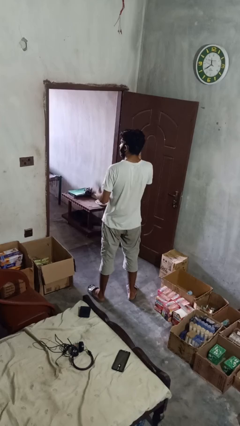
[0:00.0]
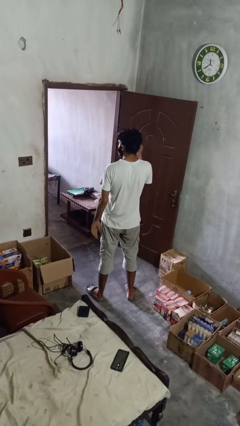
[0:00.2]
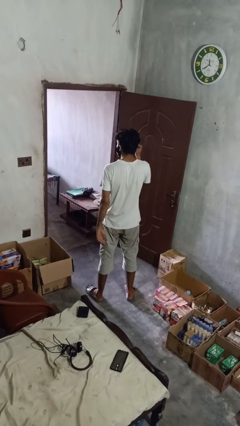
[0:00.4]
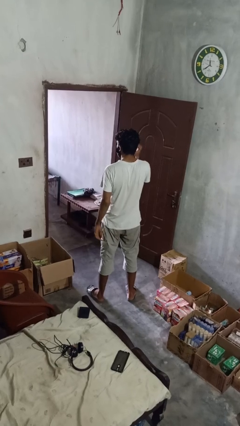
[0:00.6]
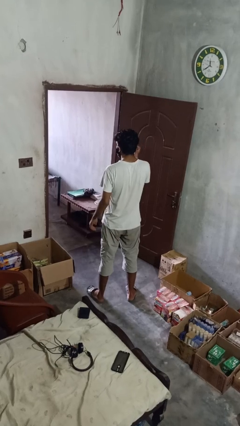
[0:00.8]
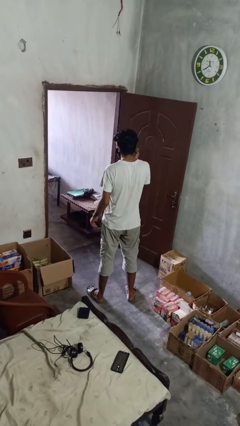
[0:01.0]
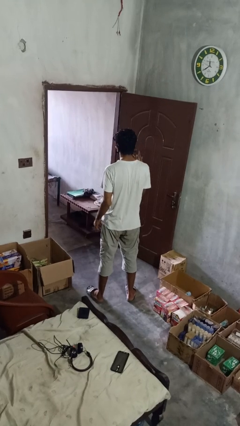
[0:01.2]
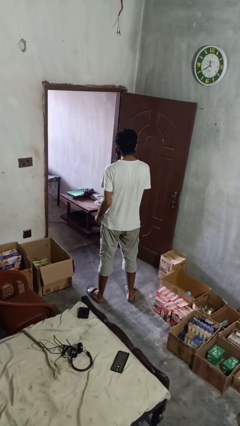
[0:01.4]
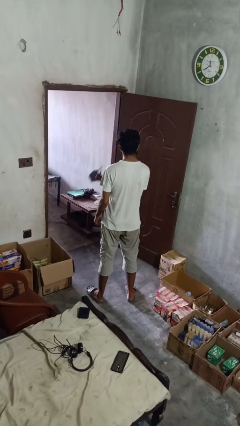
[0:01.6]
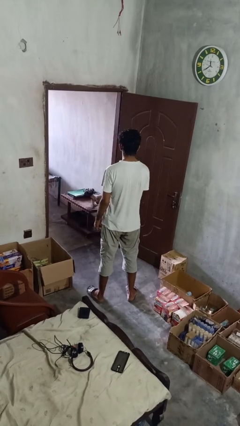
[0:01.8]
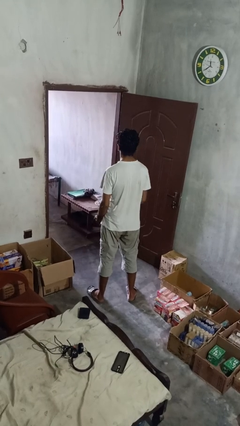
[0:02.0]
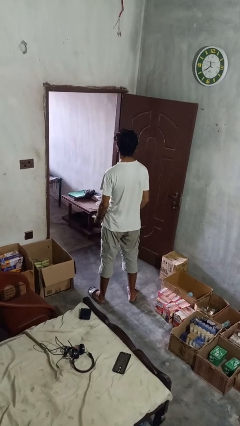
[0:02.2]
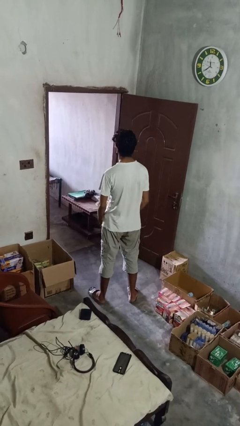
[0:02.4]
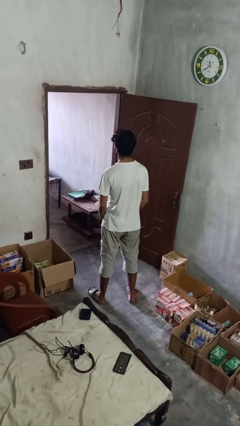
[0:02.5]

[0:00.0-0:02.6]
person takes off facemask

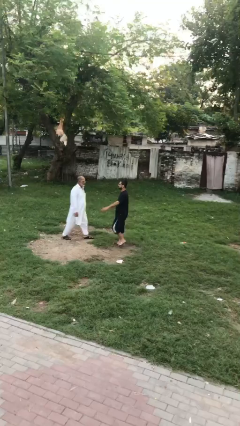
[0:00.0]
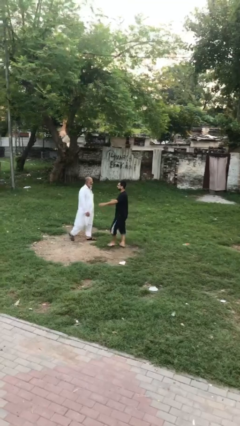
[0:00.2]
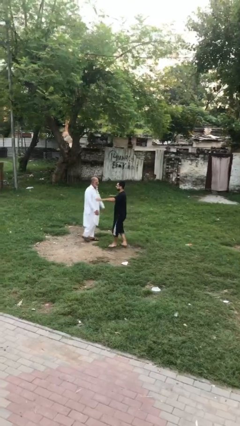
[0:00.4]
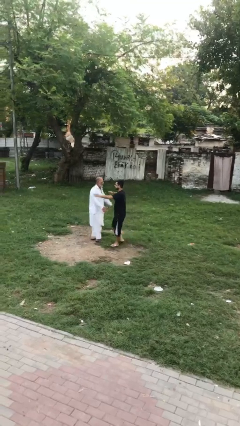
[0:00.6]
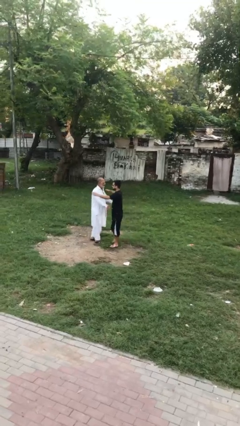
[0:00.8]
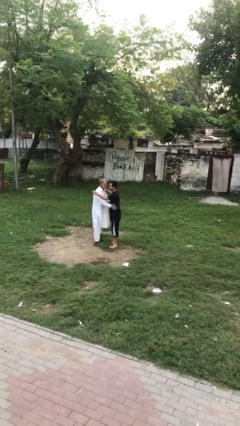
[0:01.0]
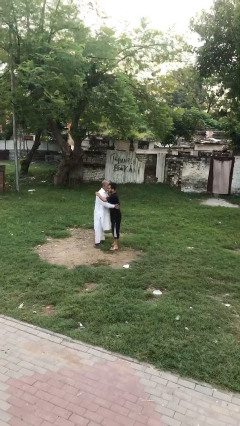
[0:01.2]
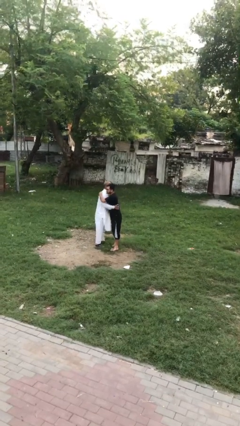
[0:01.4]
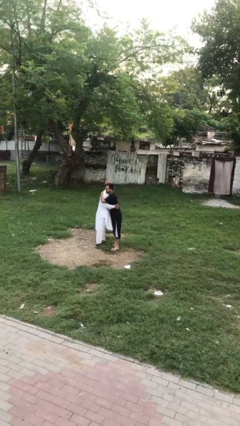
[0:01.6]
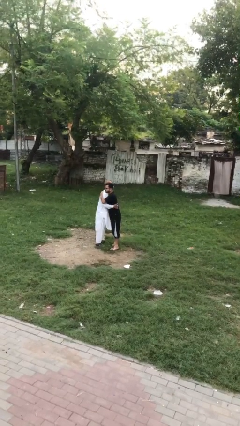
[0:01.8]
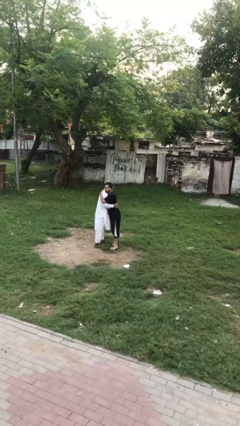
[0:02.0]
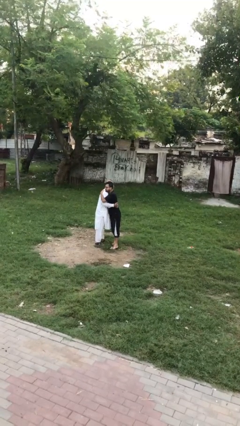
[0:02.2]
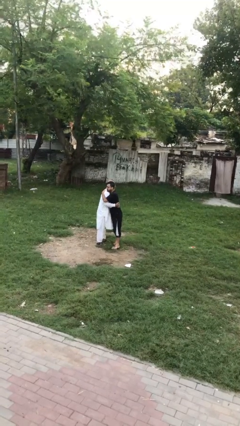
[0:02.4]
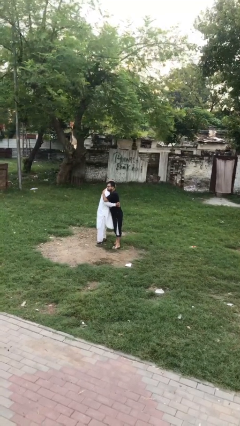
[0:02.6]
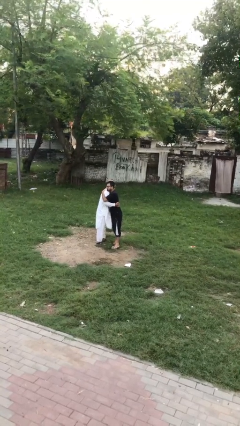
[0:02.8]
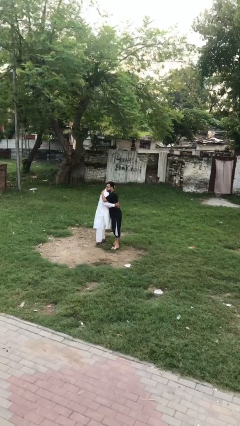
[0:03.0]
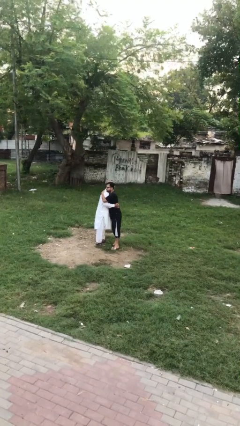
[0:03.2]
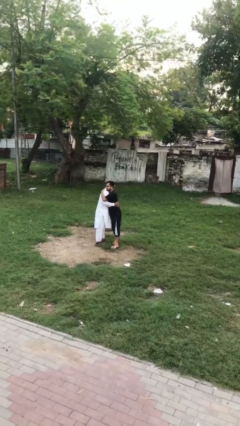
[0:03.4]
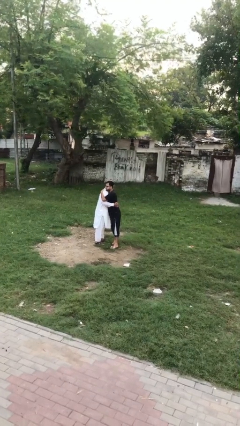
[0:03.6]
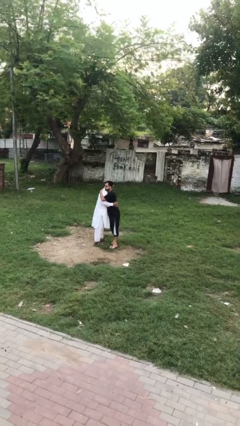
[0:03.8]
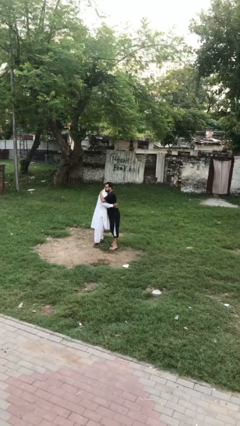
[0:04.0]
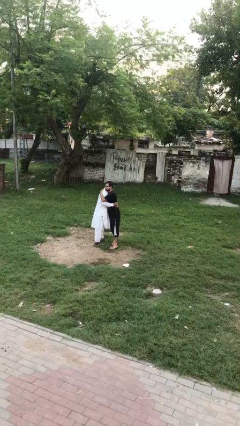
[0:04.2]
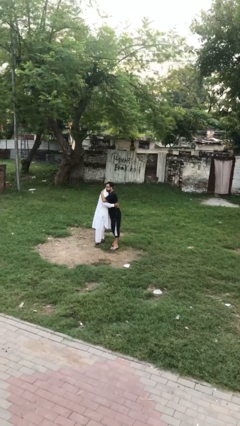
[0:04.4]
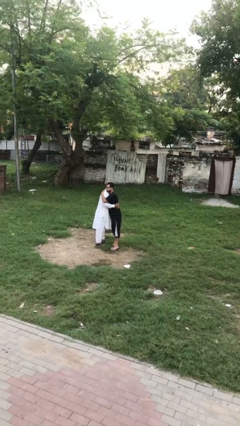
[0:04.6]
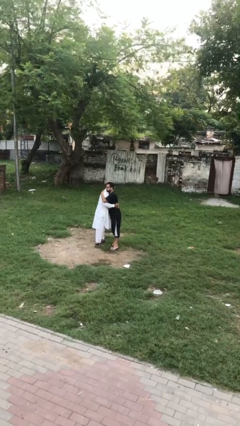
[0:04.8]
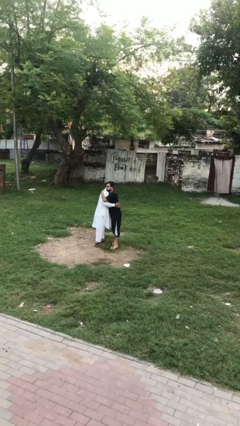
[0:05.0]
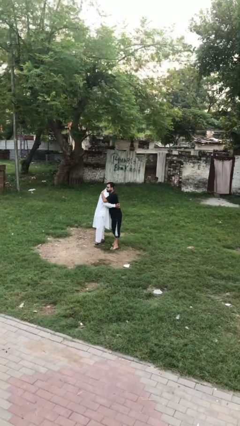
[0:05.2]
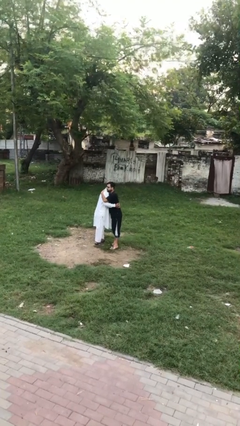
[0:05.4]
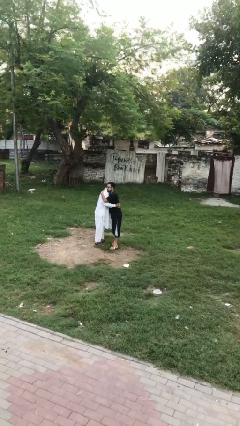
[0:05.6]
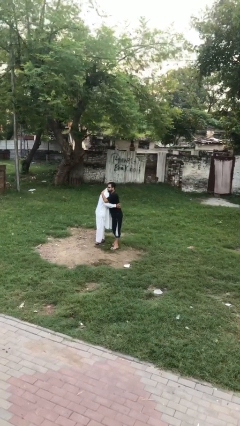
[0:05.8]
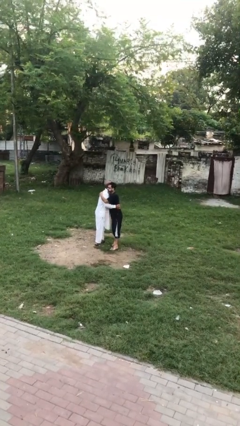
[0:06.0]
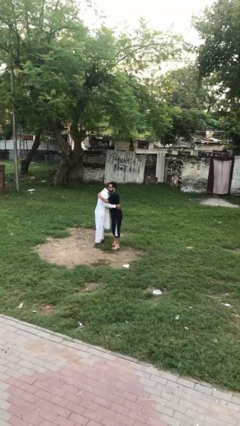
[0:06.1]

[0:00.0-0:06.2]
person embraces person

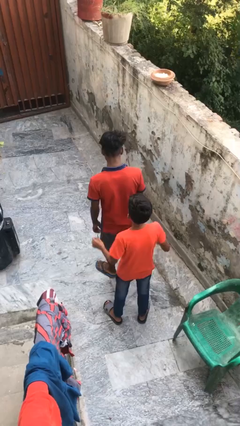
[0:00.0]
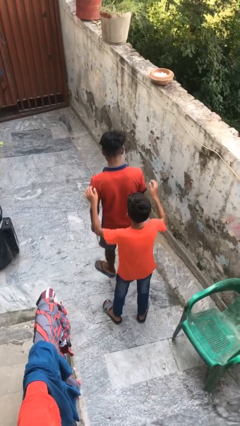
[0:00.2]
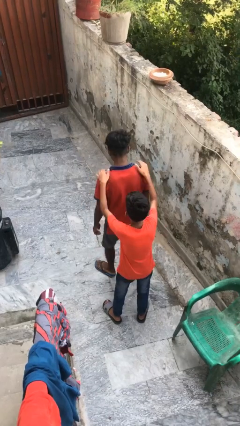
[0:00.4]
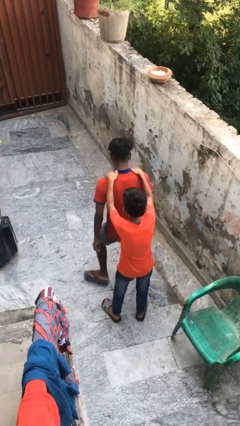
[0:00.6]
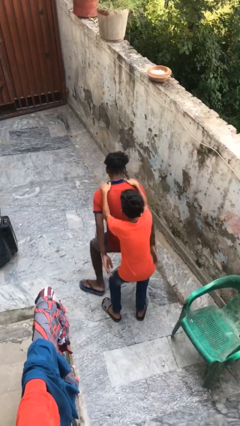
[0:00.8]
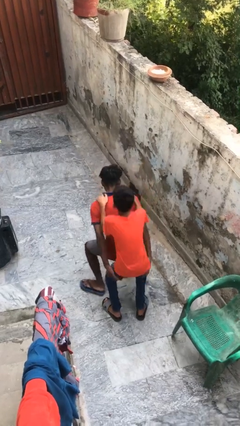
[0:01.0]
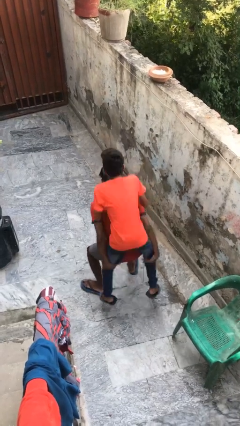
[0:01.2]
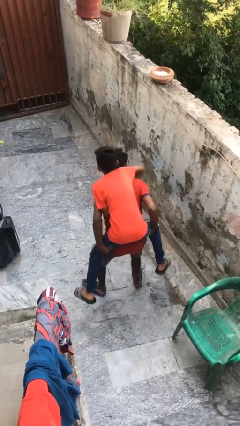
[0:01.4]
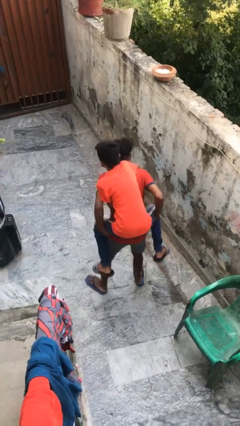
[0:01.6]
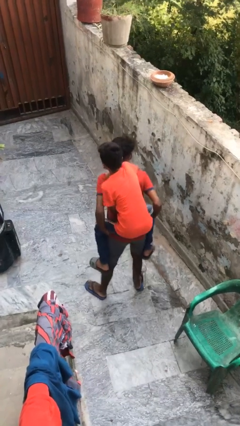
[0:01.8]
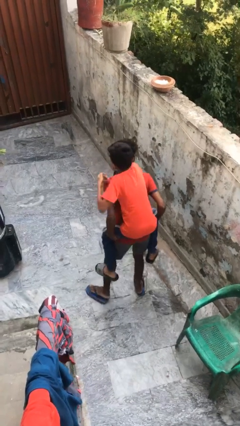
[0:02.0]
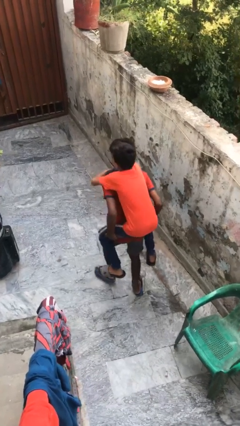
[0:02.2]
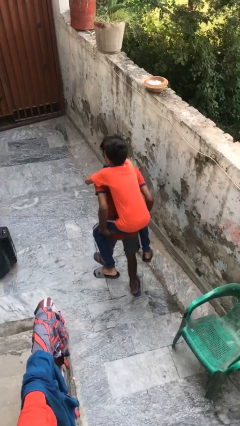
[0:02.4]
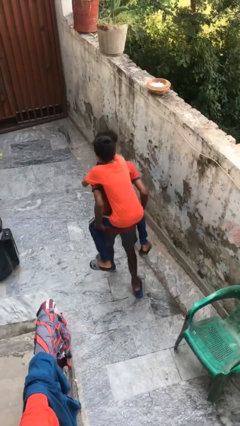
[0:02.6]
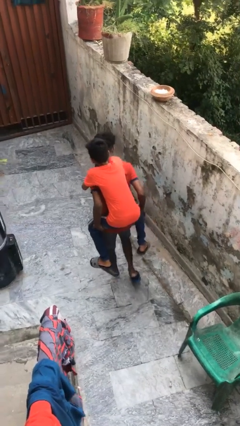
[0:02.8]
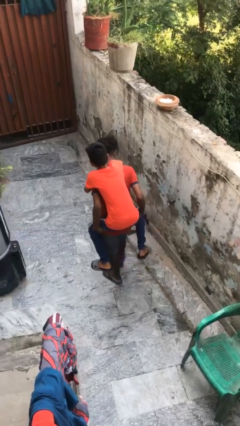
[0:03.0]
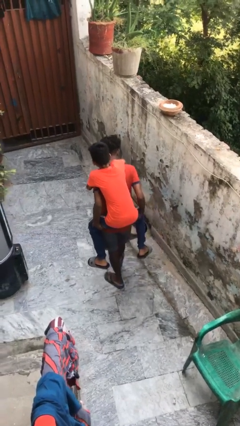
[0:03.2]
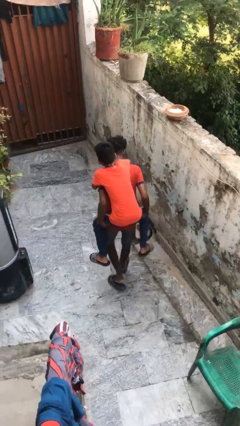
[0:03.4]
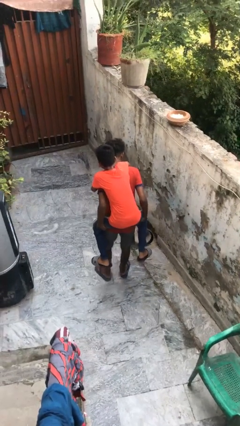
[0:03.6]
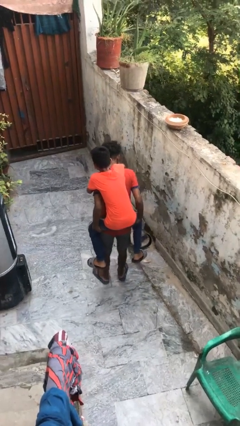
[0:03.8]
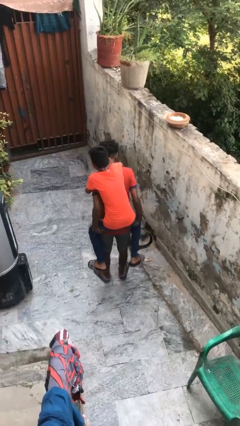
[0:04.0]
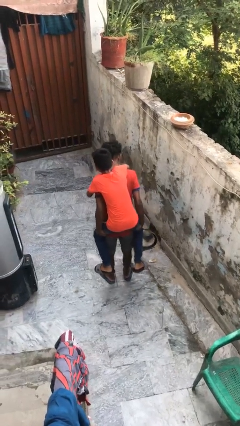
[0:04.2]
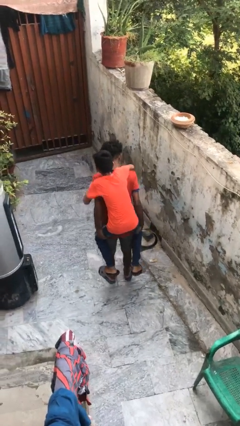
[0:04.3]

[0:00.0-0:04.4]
person carries person on back

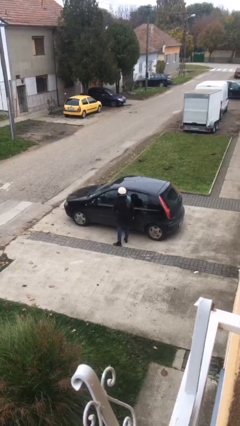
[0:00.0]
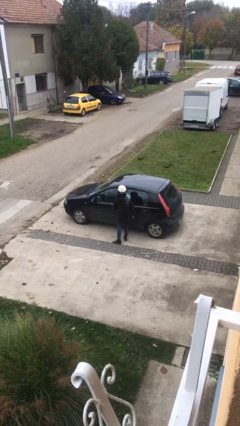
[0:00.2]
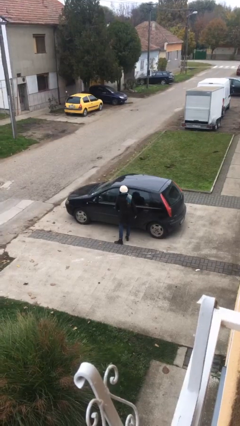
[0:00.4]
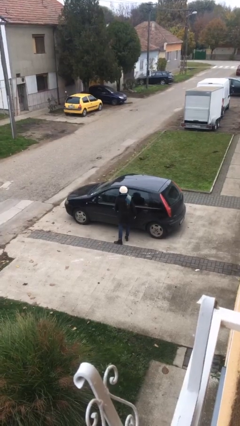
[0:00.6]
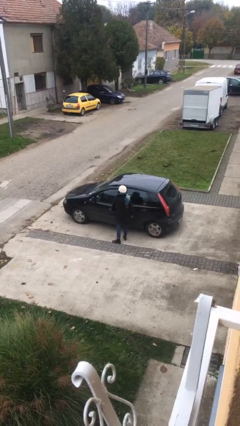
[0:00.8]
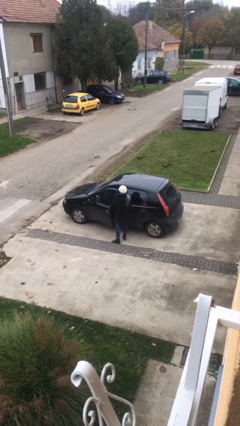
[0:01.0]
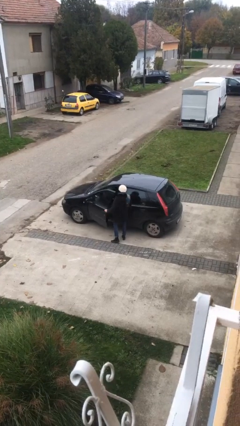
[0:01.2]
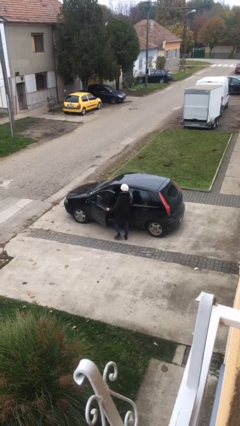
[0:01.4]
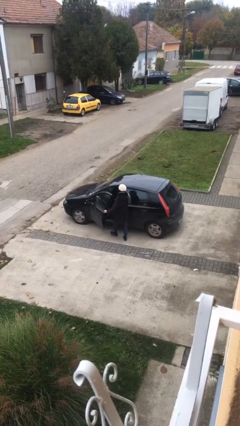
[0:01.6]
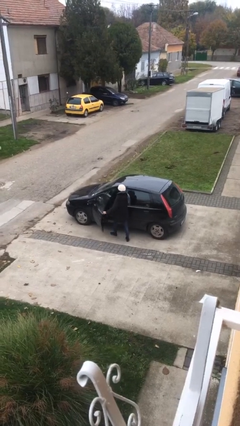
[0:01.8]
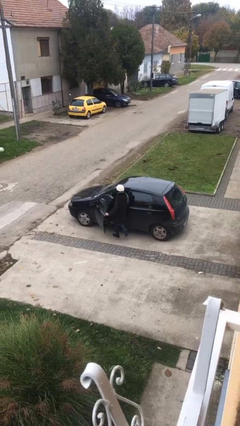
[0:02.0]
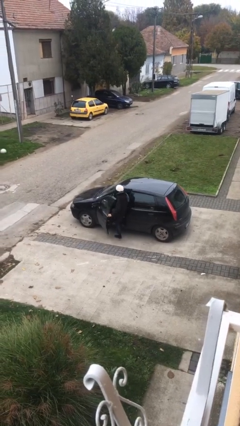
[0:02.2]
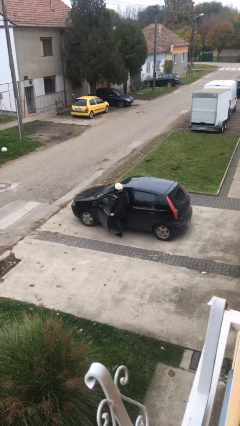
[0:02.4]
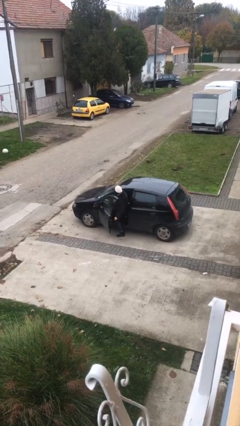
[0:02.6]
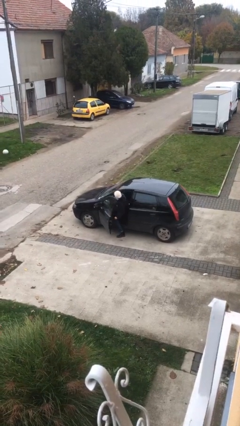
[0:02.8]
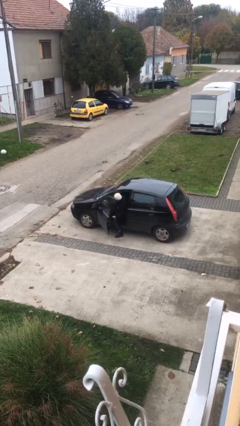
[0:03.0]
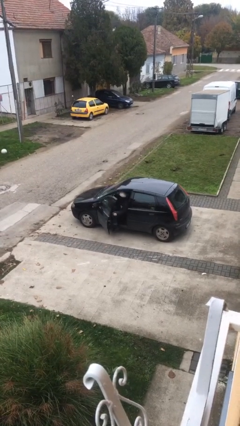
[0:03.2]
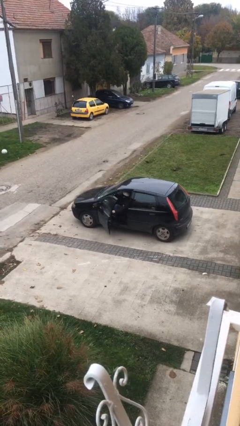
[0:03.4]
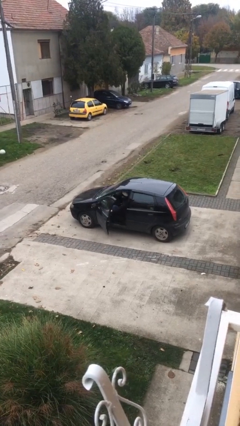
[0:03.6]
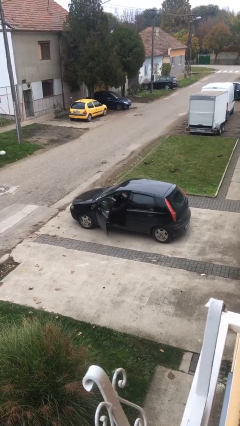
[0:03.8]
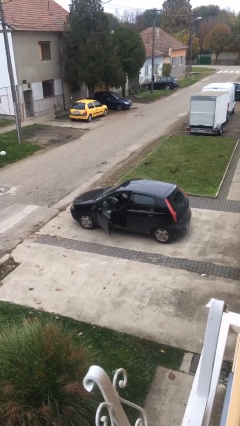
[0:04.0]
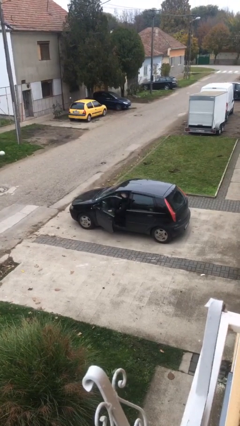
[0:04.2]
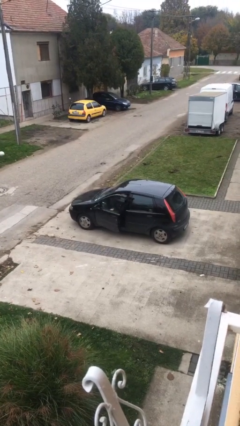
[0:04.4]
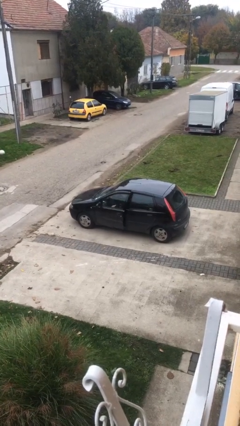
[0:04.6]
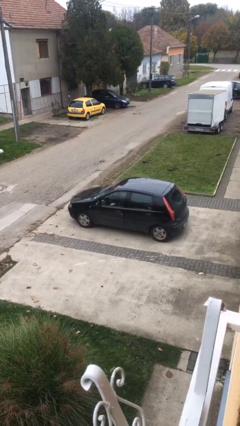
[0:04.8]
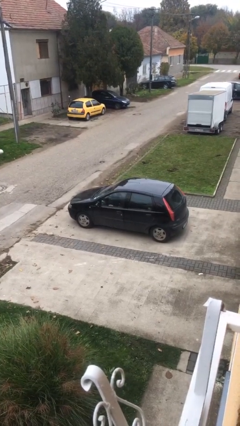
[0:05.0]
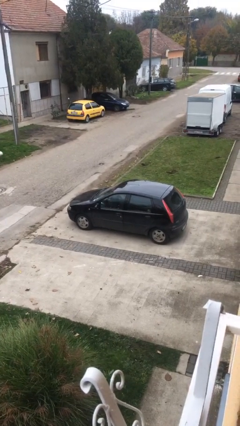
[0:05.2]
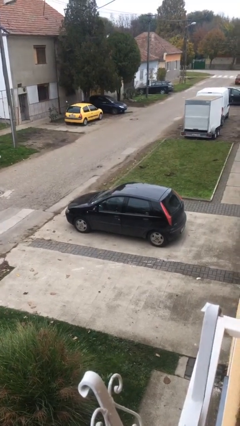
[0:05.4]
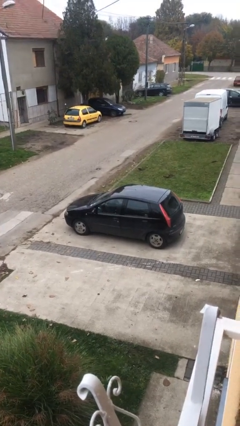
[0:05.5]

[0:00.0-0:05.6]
person enters car
